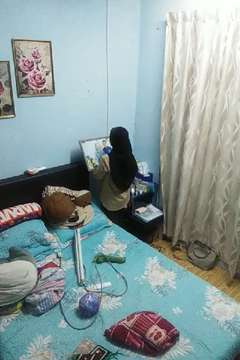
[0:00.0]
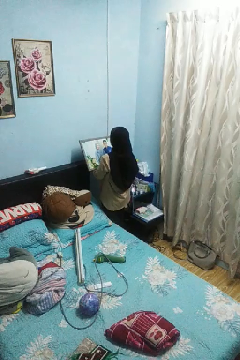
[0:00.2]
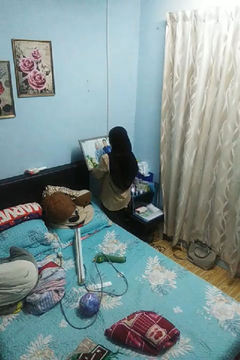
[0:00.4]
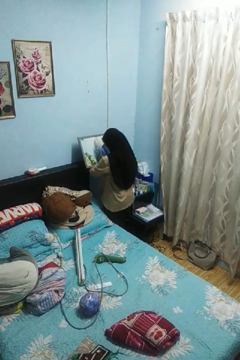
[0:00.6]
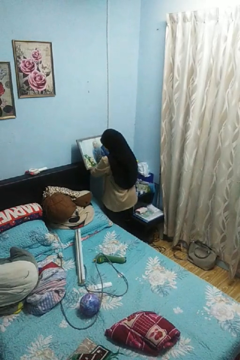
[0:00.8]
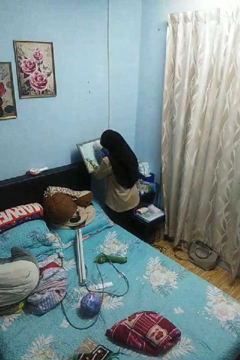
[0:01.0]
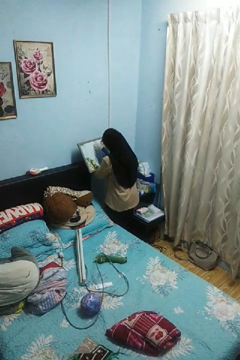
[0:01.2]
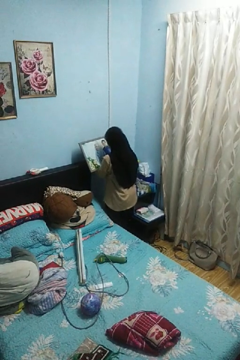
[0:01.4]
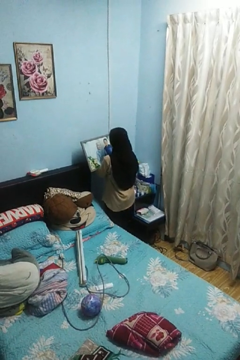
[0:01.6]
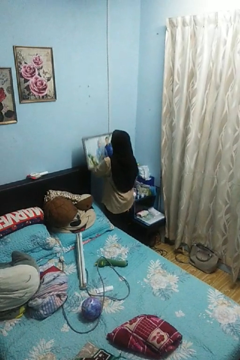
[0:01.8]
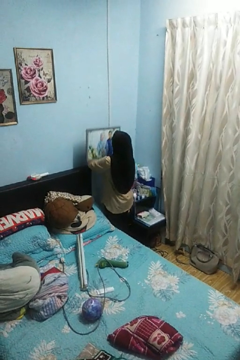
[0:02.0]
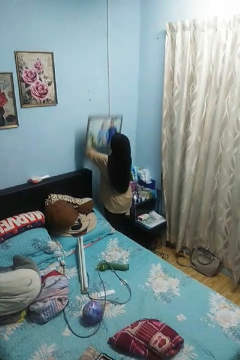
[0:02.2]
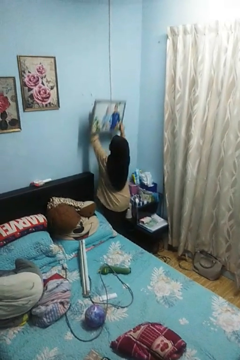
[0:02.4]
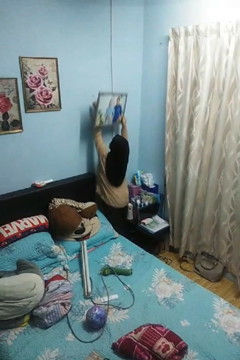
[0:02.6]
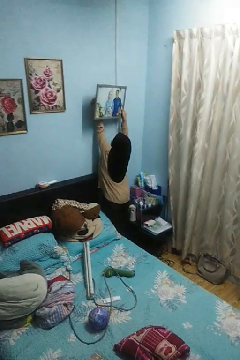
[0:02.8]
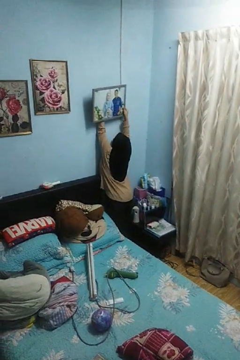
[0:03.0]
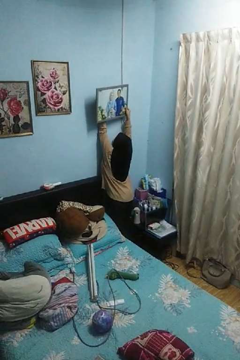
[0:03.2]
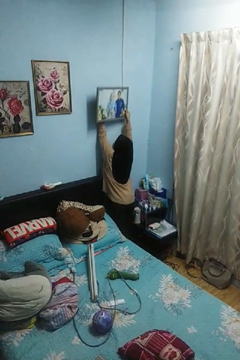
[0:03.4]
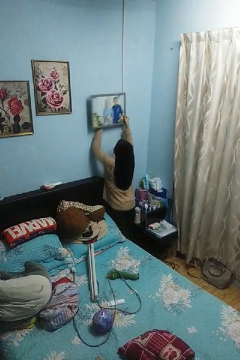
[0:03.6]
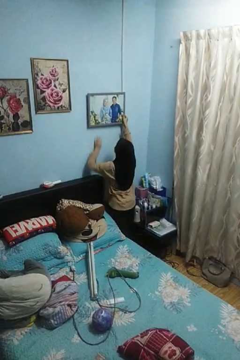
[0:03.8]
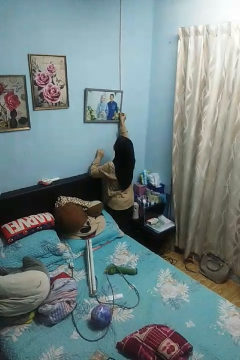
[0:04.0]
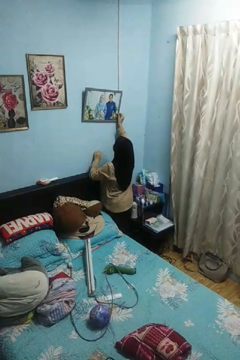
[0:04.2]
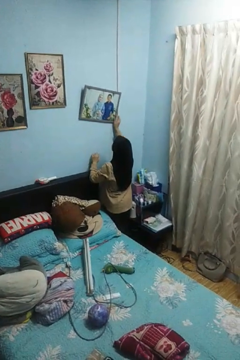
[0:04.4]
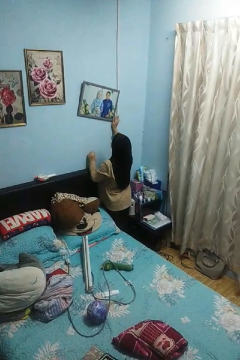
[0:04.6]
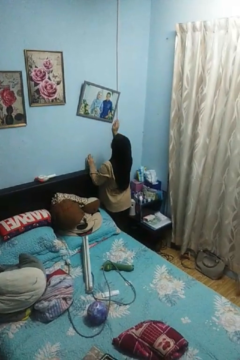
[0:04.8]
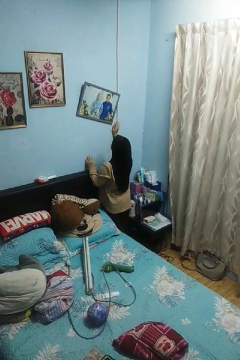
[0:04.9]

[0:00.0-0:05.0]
person puts up picture frame

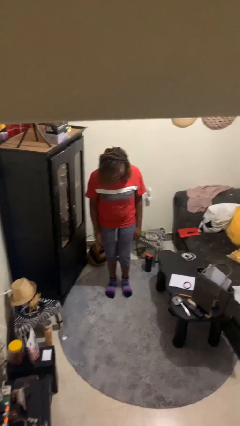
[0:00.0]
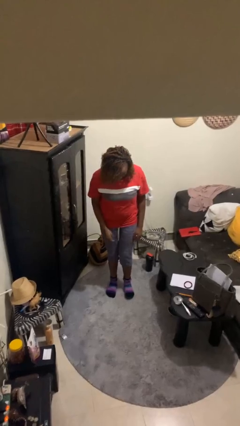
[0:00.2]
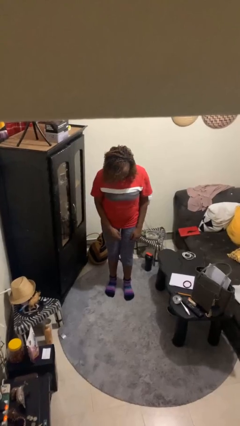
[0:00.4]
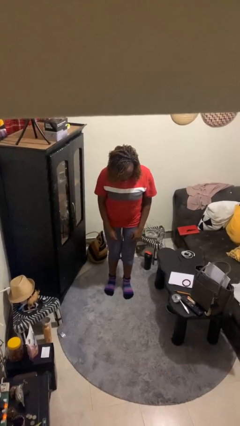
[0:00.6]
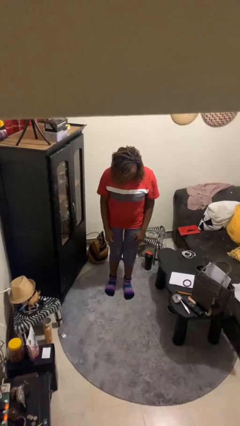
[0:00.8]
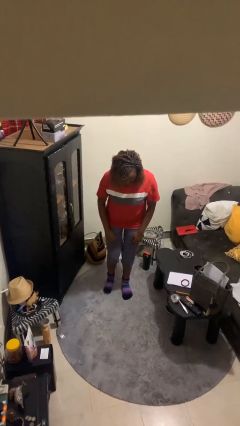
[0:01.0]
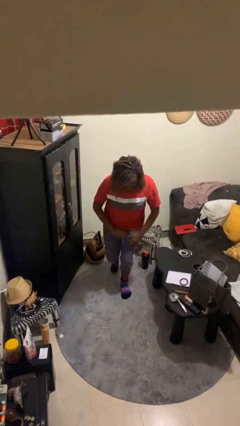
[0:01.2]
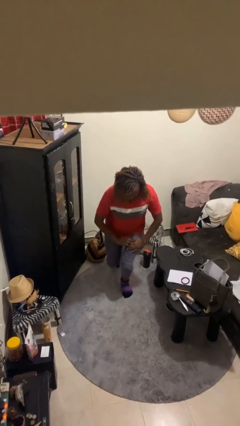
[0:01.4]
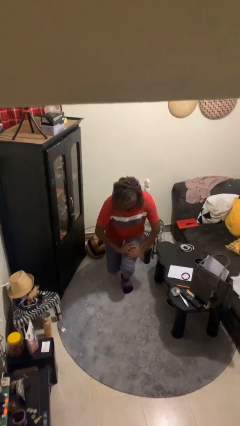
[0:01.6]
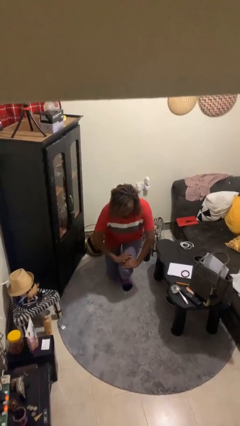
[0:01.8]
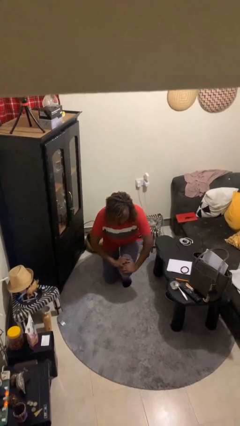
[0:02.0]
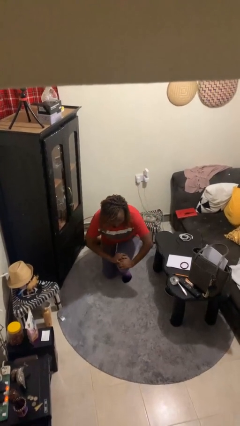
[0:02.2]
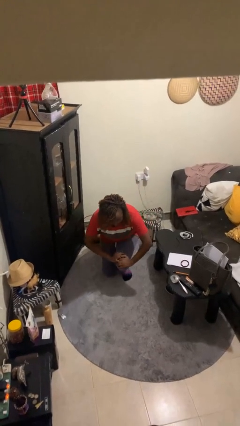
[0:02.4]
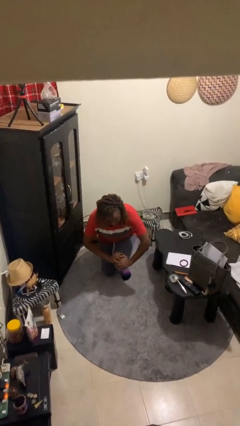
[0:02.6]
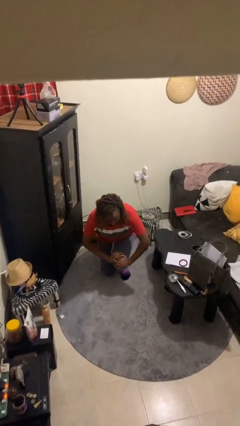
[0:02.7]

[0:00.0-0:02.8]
person kneels

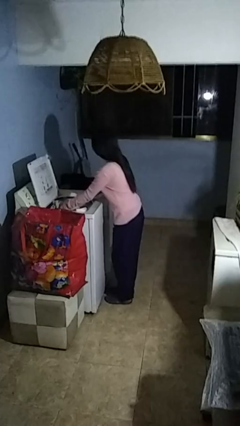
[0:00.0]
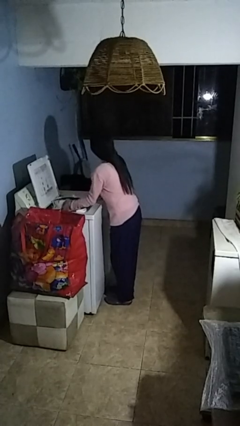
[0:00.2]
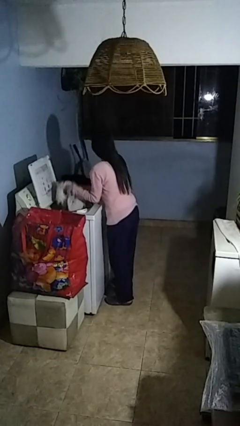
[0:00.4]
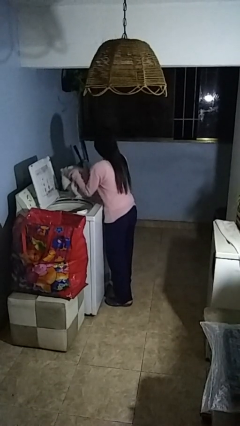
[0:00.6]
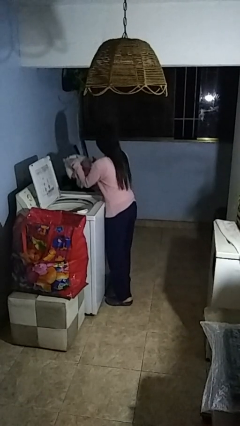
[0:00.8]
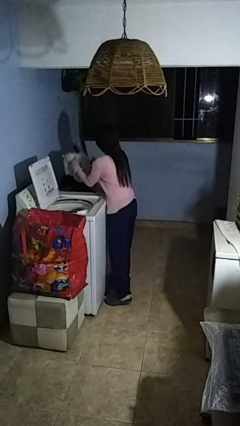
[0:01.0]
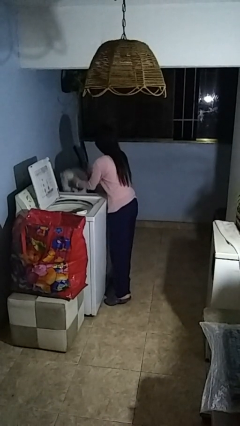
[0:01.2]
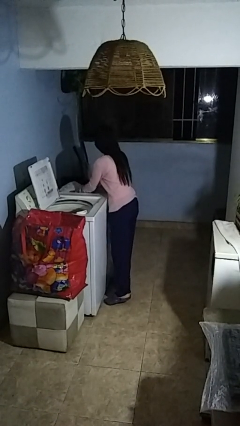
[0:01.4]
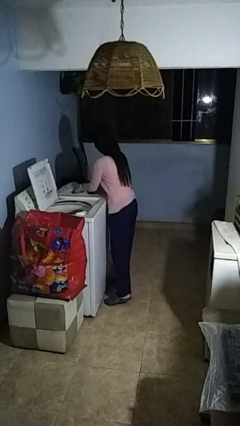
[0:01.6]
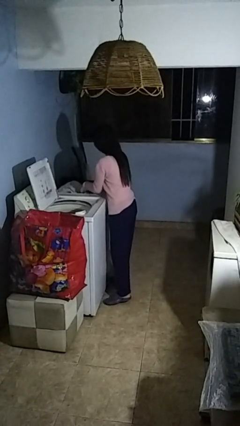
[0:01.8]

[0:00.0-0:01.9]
person loads clotheswasher

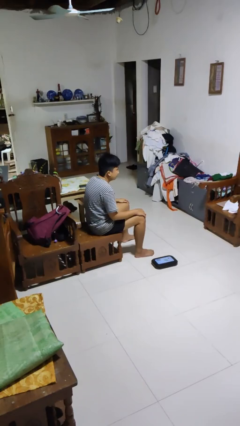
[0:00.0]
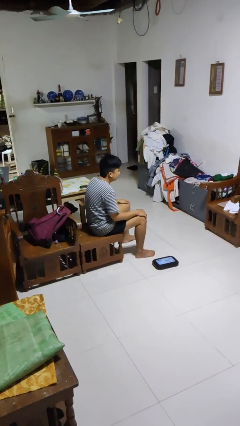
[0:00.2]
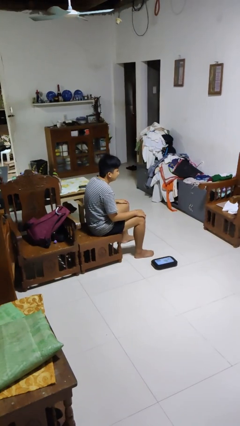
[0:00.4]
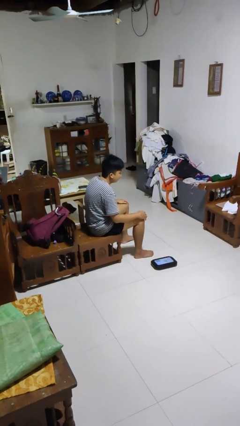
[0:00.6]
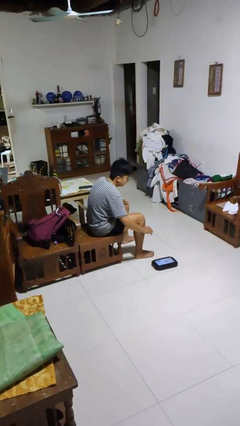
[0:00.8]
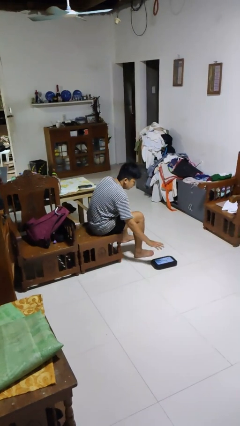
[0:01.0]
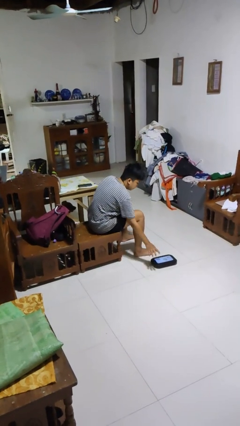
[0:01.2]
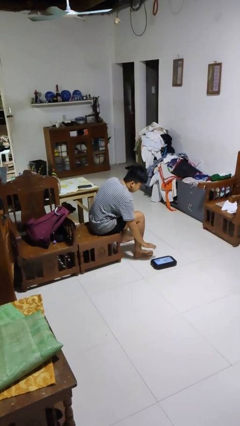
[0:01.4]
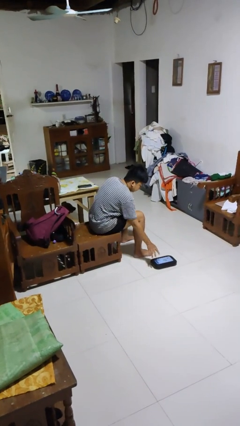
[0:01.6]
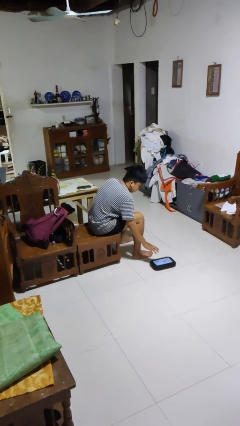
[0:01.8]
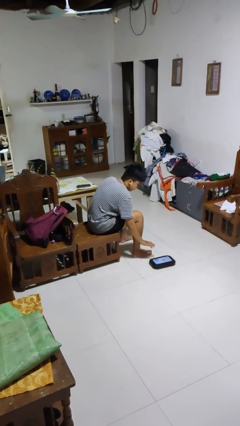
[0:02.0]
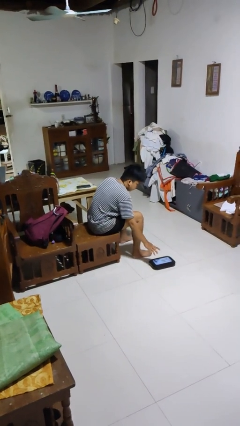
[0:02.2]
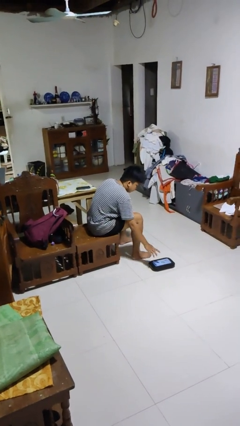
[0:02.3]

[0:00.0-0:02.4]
person waves hand over object

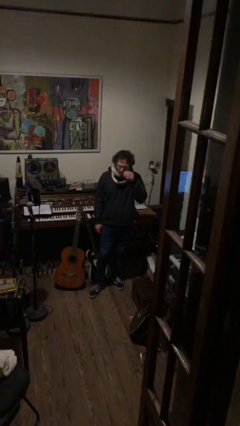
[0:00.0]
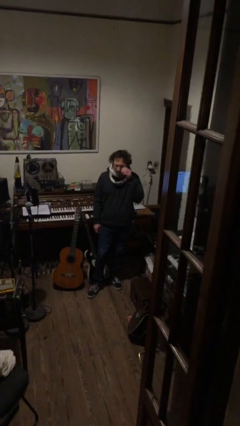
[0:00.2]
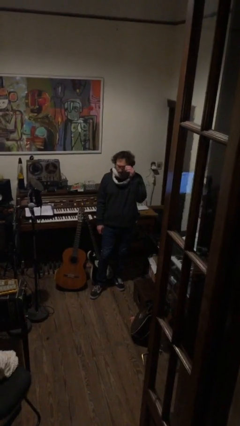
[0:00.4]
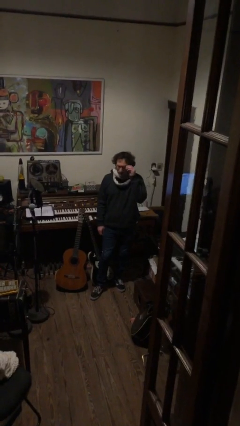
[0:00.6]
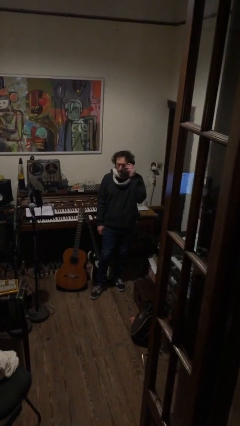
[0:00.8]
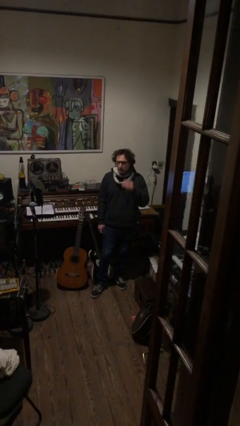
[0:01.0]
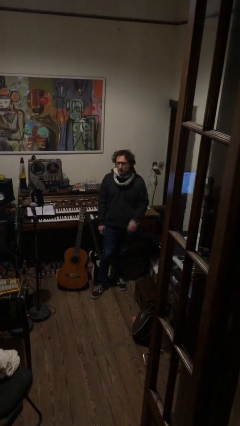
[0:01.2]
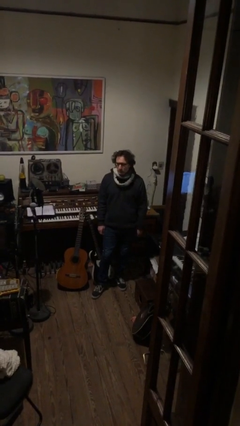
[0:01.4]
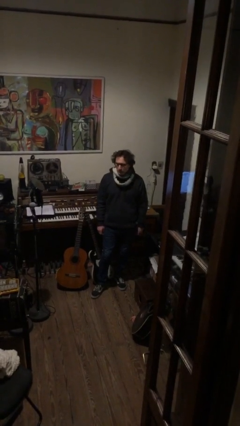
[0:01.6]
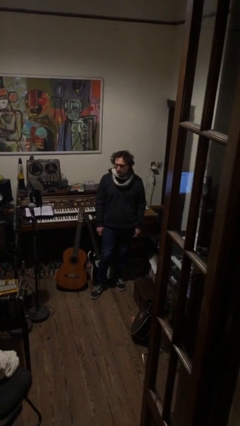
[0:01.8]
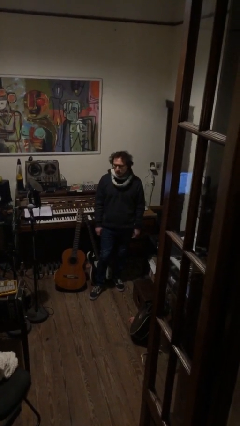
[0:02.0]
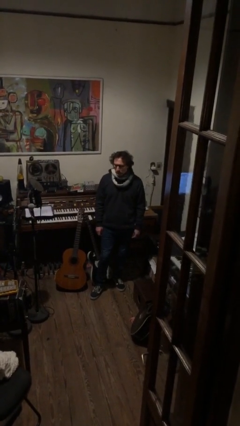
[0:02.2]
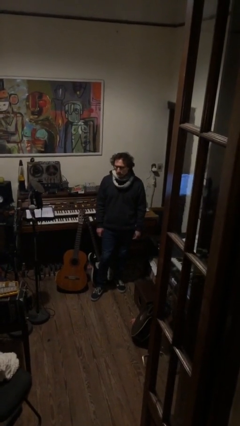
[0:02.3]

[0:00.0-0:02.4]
person puts on glasses

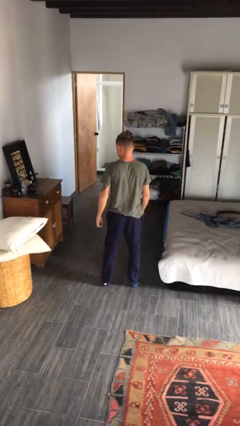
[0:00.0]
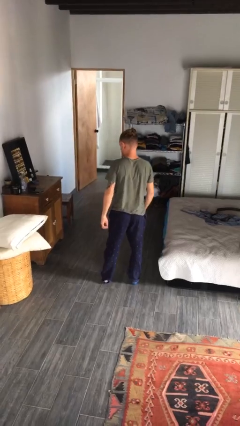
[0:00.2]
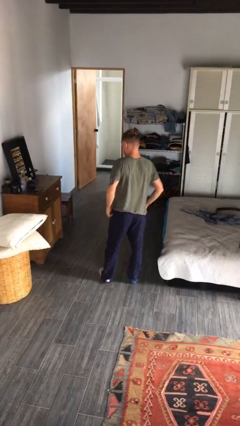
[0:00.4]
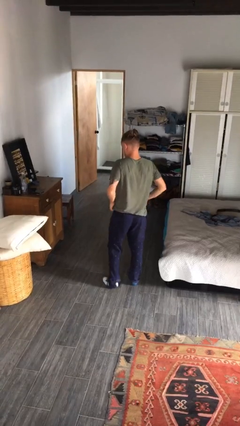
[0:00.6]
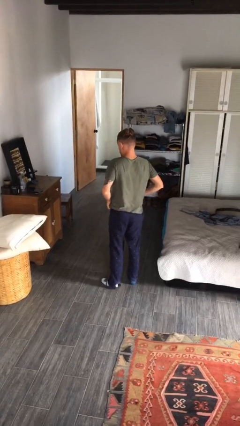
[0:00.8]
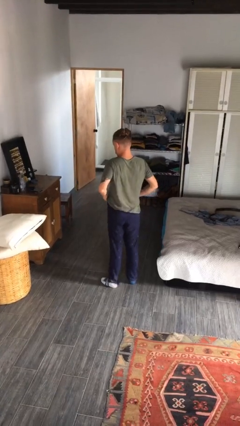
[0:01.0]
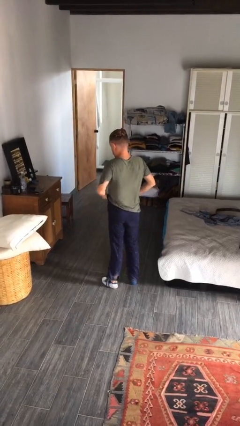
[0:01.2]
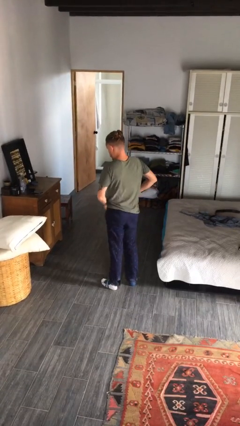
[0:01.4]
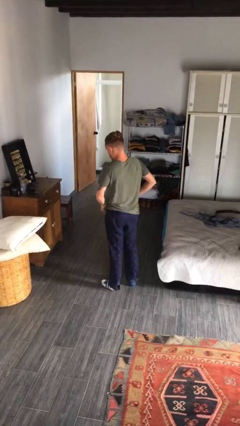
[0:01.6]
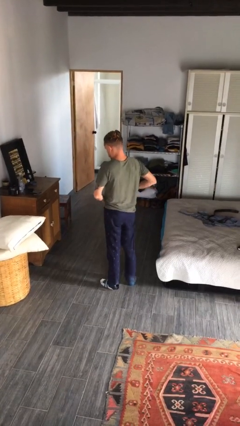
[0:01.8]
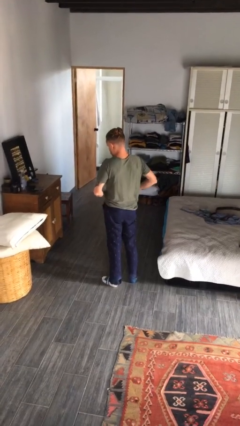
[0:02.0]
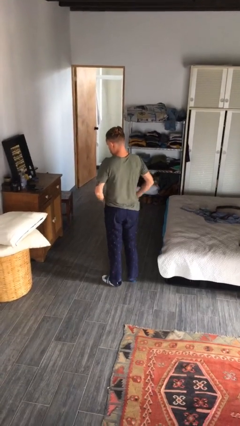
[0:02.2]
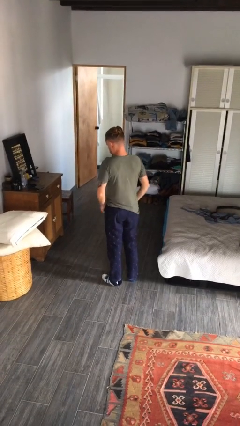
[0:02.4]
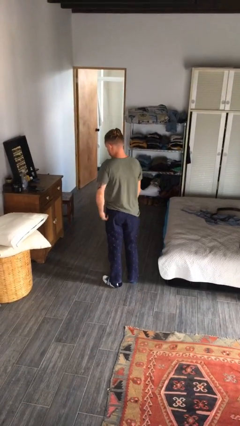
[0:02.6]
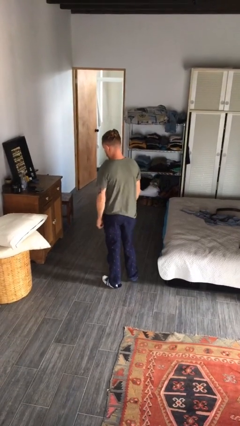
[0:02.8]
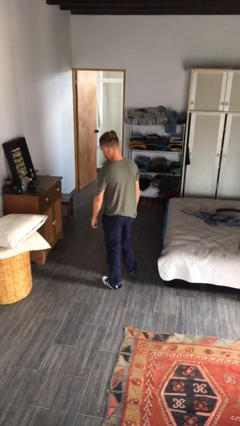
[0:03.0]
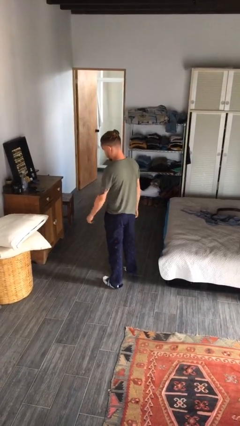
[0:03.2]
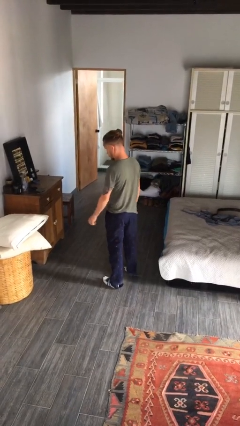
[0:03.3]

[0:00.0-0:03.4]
person hikes up pants

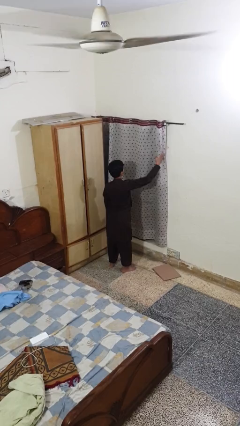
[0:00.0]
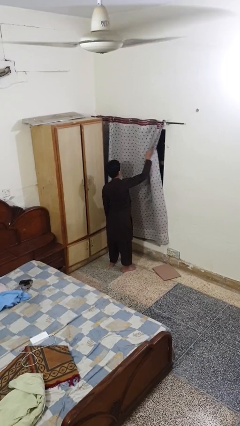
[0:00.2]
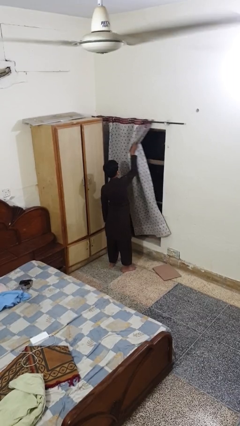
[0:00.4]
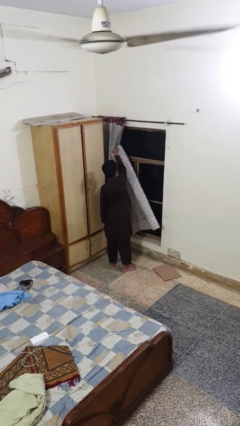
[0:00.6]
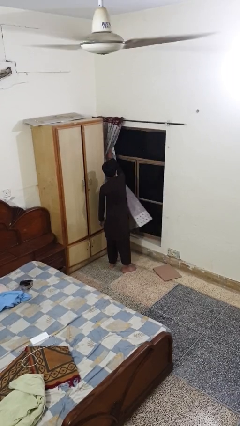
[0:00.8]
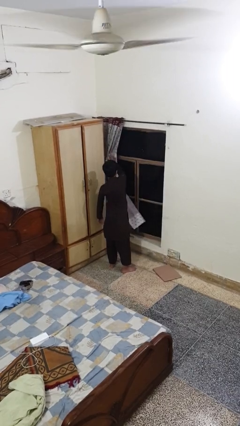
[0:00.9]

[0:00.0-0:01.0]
person opens curtains
